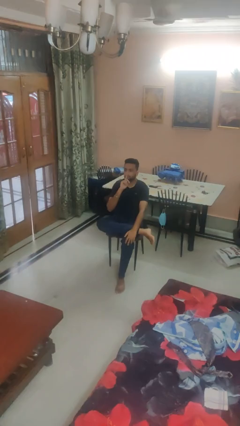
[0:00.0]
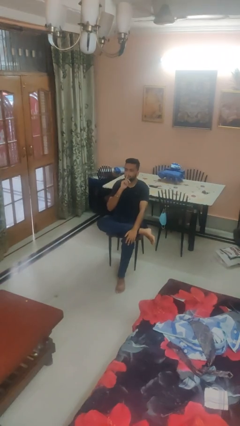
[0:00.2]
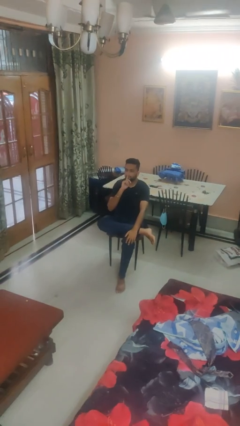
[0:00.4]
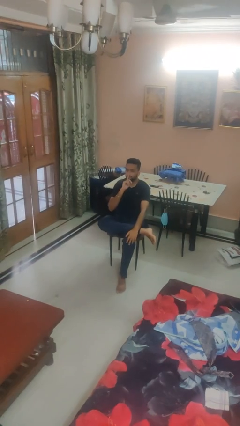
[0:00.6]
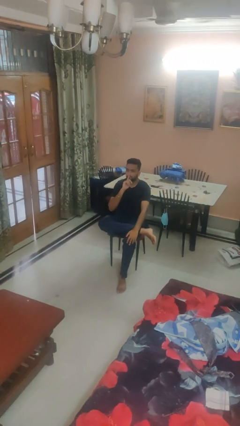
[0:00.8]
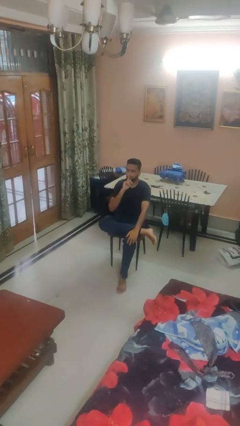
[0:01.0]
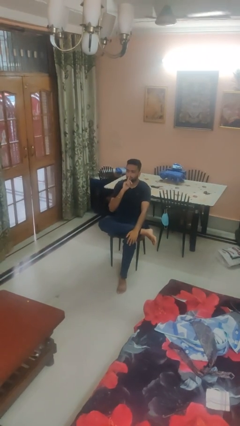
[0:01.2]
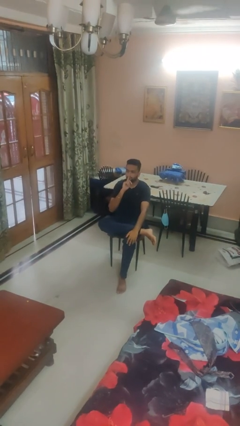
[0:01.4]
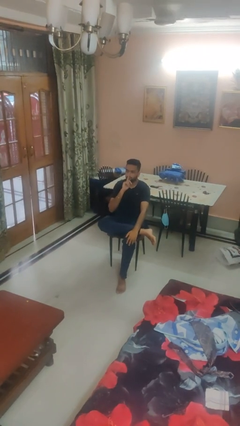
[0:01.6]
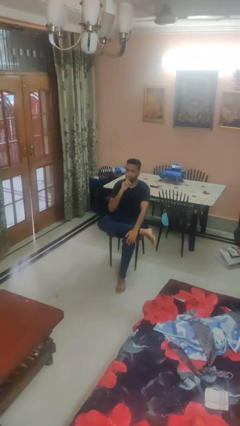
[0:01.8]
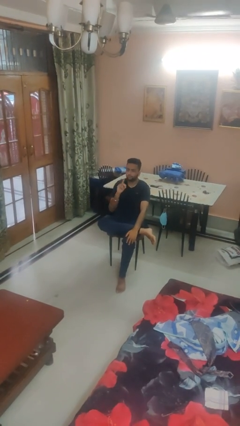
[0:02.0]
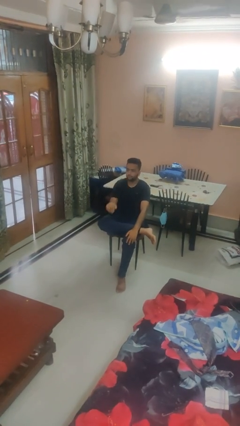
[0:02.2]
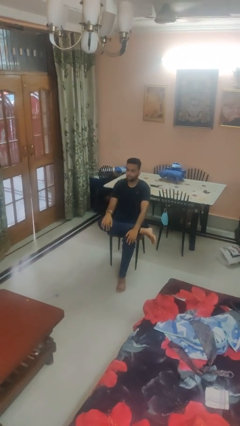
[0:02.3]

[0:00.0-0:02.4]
person gestures be quiet

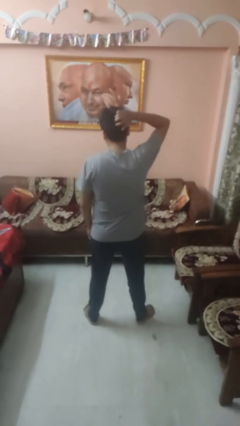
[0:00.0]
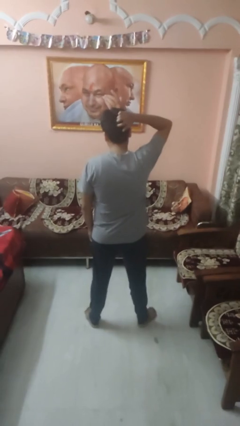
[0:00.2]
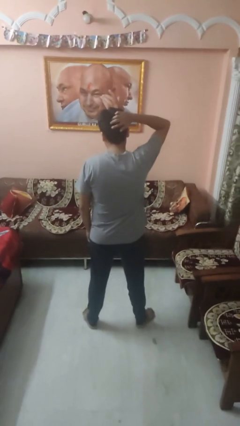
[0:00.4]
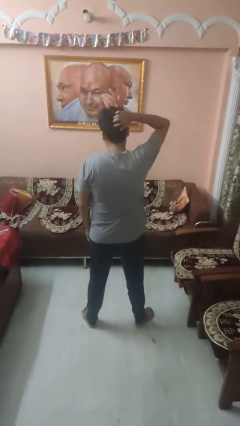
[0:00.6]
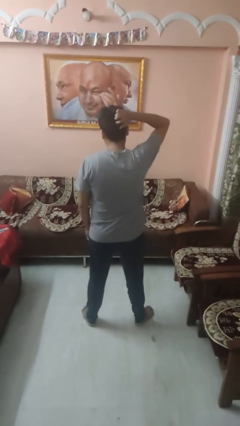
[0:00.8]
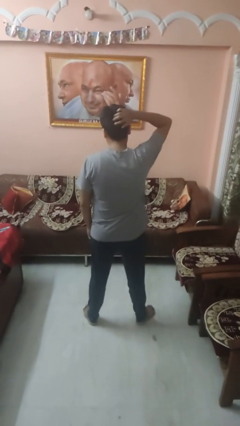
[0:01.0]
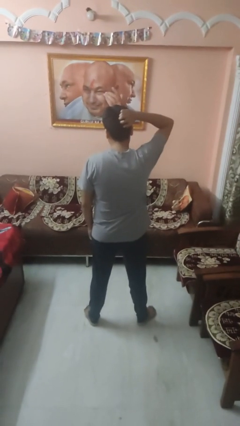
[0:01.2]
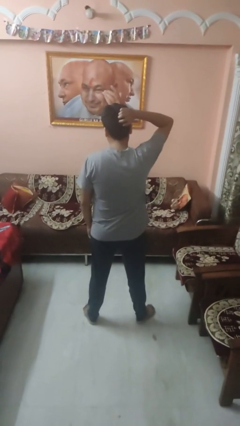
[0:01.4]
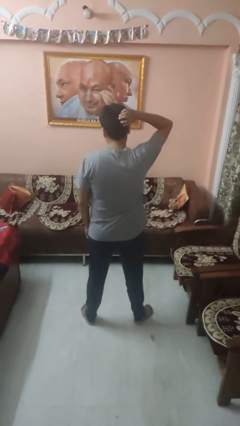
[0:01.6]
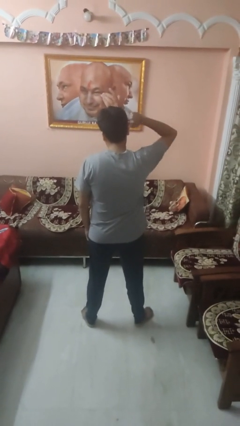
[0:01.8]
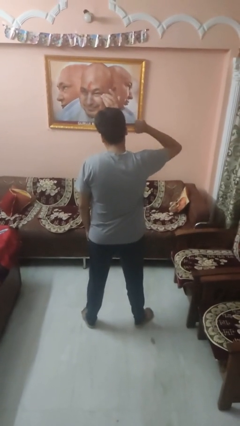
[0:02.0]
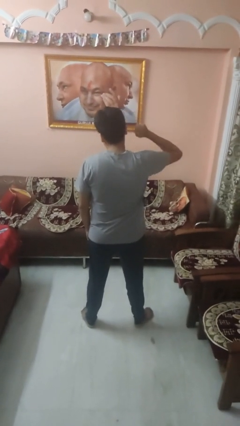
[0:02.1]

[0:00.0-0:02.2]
person scratches face

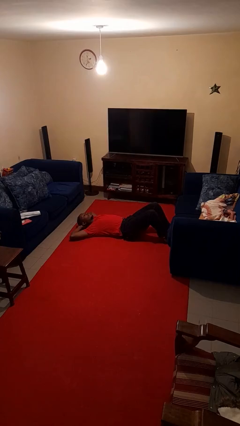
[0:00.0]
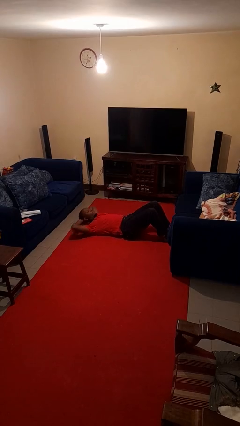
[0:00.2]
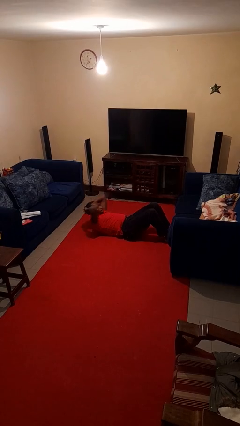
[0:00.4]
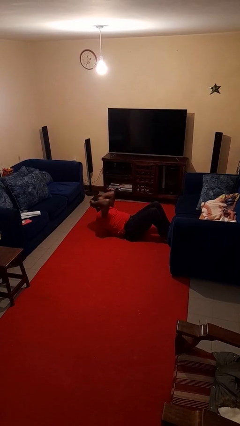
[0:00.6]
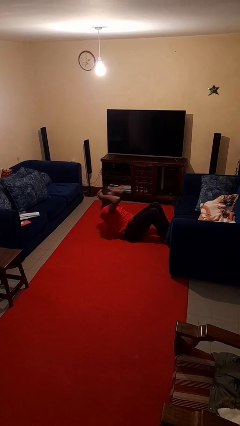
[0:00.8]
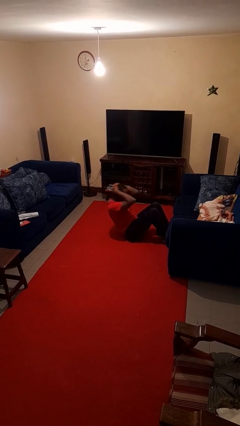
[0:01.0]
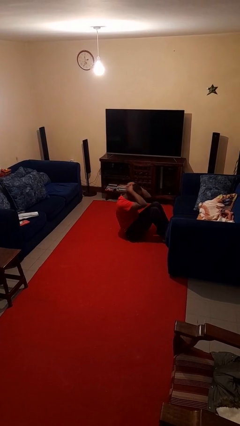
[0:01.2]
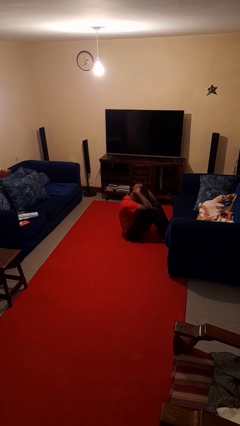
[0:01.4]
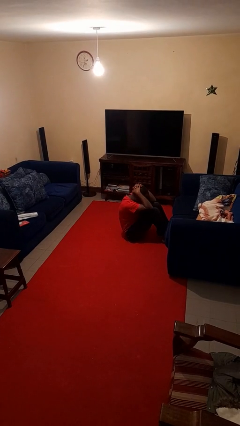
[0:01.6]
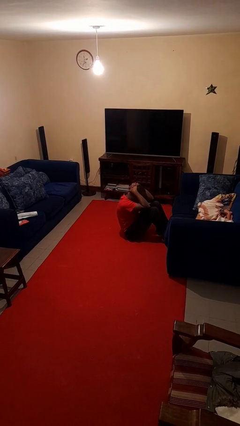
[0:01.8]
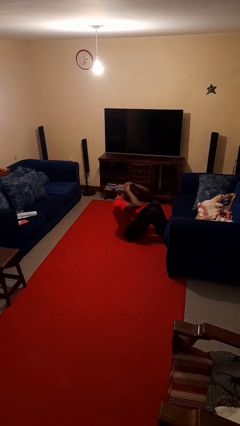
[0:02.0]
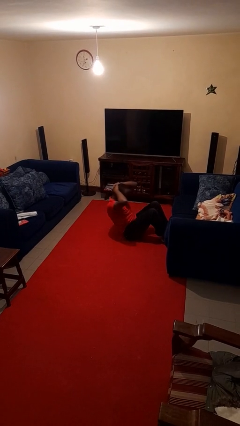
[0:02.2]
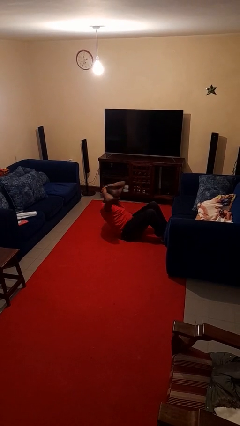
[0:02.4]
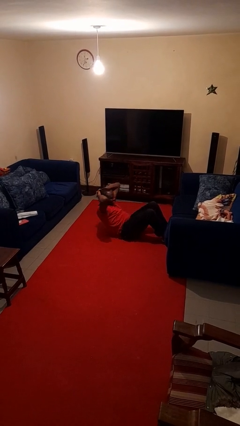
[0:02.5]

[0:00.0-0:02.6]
person exercises with situp

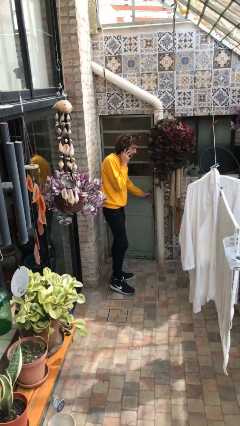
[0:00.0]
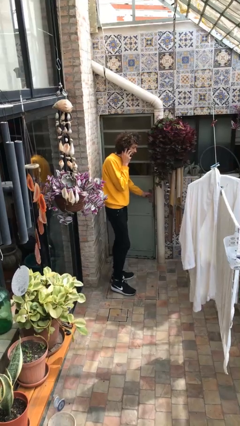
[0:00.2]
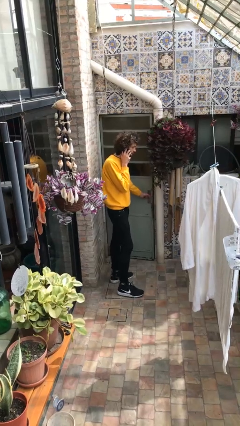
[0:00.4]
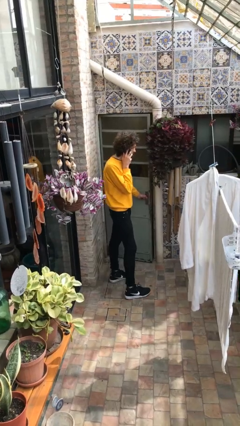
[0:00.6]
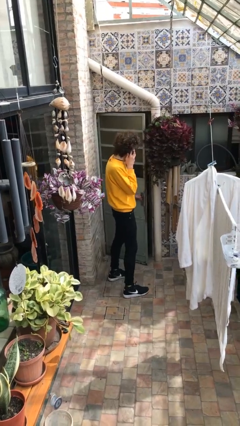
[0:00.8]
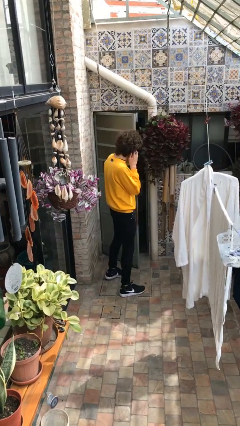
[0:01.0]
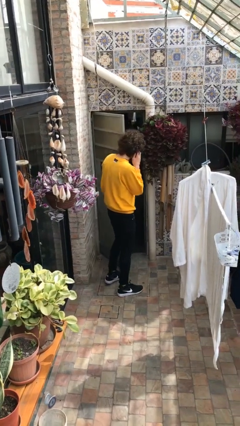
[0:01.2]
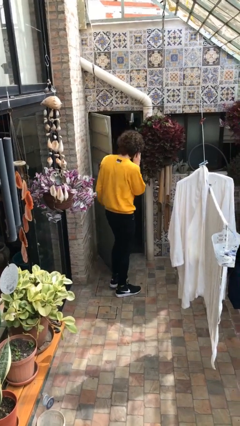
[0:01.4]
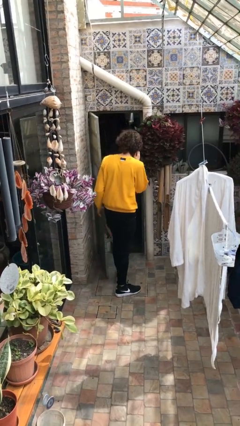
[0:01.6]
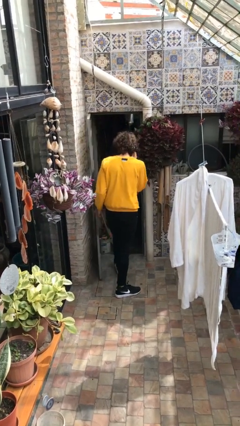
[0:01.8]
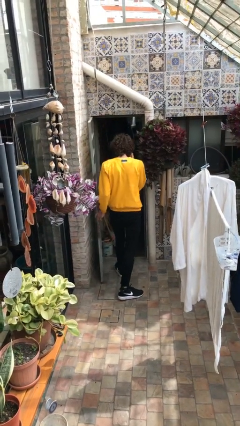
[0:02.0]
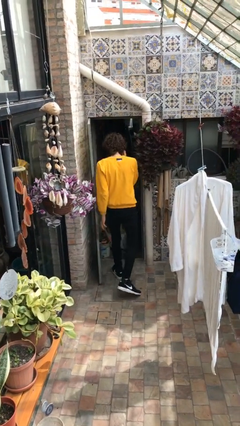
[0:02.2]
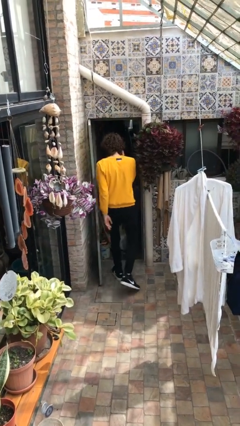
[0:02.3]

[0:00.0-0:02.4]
person opens facility door

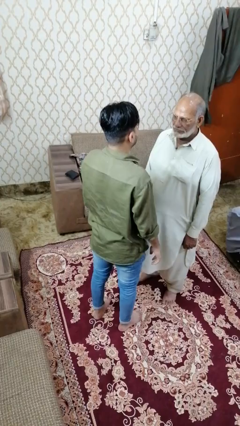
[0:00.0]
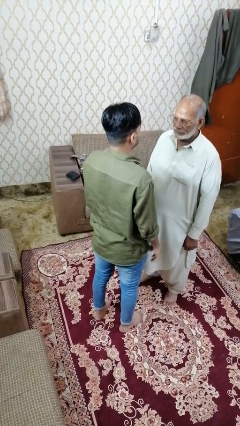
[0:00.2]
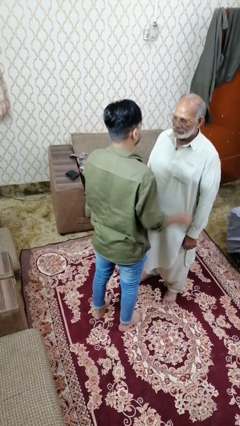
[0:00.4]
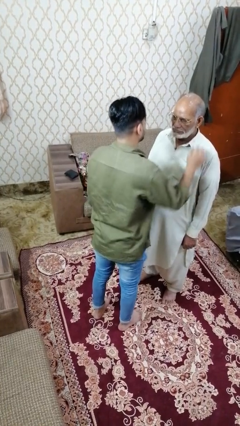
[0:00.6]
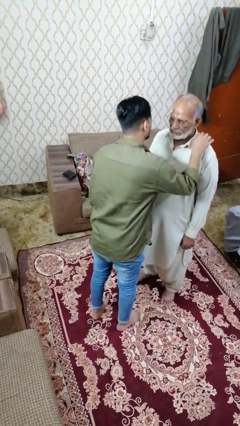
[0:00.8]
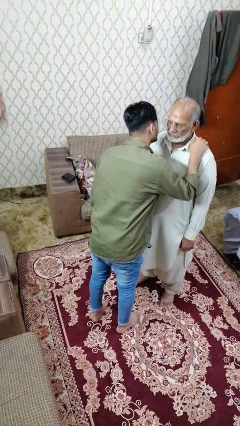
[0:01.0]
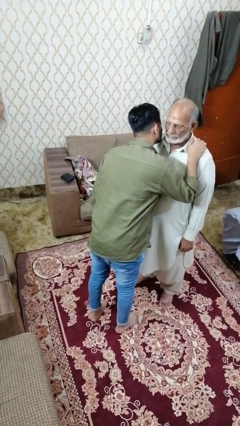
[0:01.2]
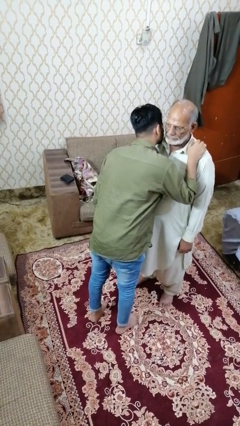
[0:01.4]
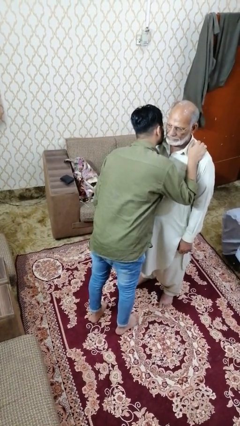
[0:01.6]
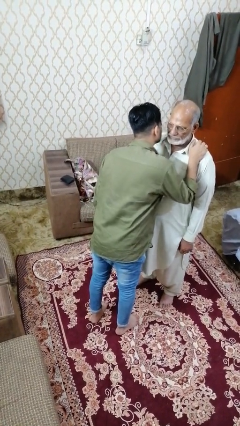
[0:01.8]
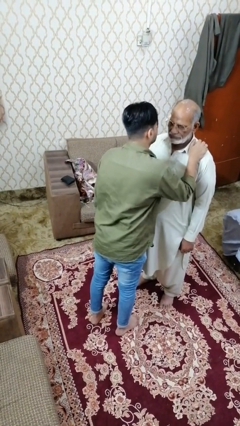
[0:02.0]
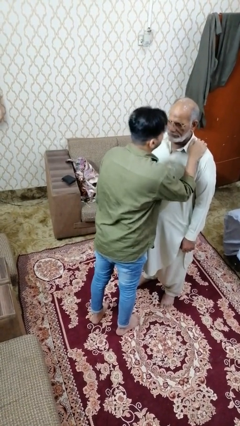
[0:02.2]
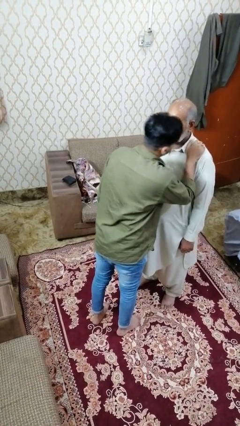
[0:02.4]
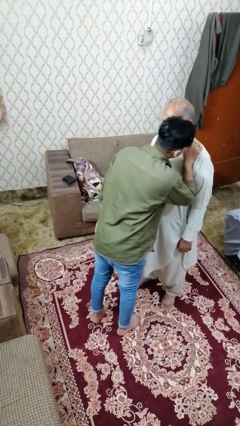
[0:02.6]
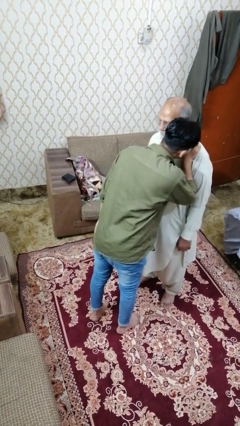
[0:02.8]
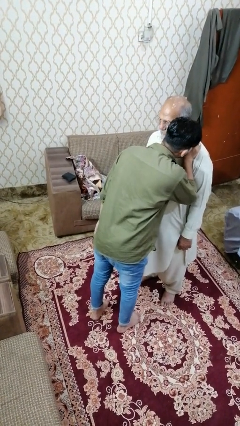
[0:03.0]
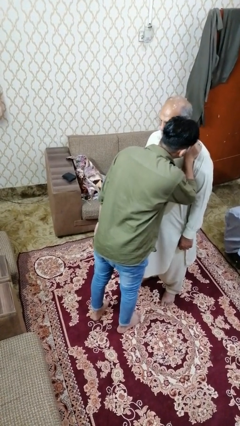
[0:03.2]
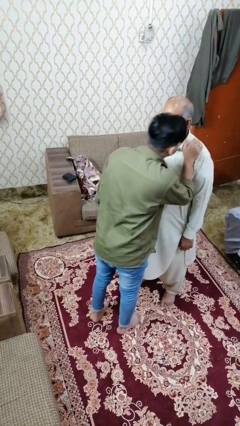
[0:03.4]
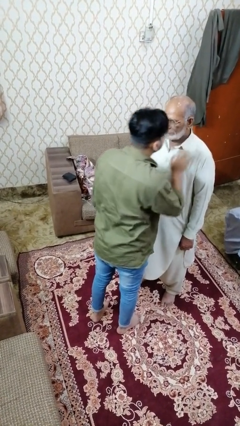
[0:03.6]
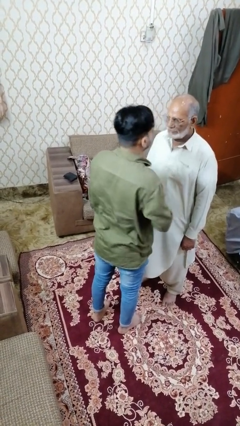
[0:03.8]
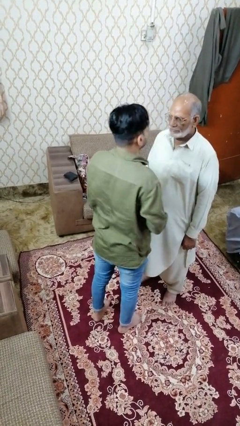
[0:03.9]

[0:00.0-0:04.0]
person kisses cheek of person

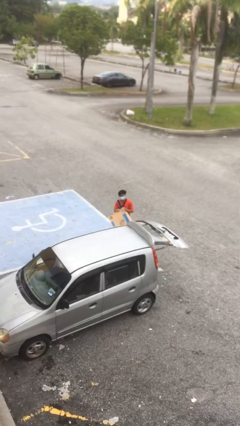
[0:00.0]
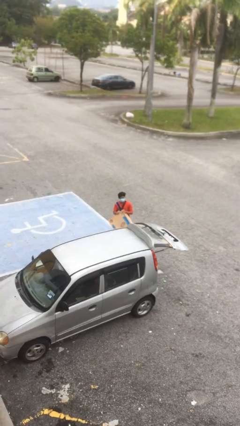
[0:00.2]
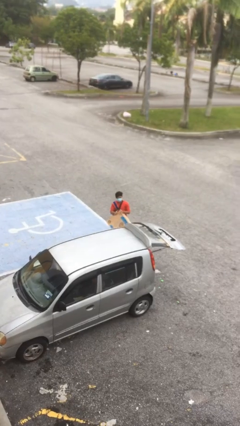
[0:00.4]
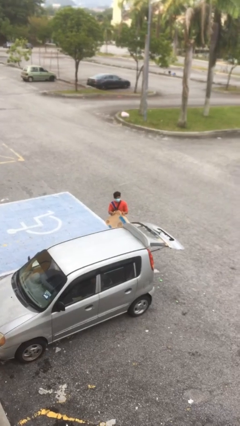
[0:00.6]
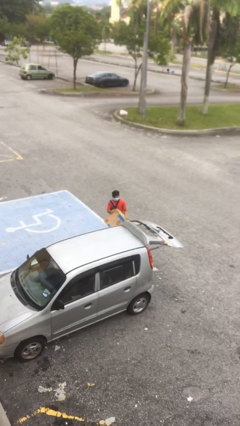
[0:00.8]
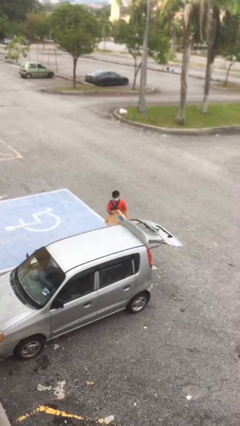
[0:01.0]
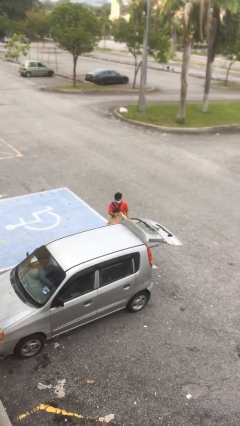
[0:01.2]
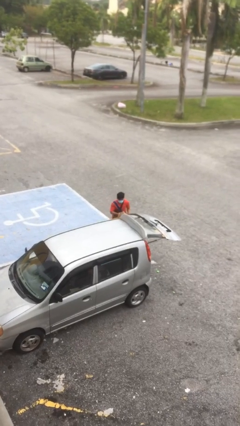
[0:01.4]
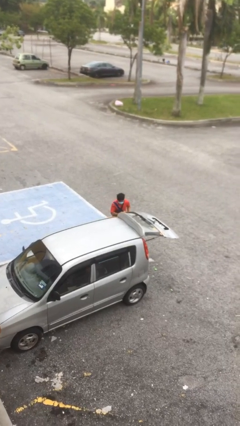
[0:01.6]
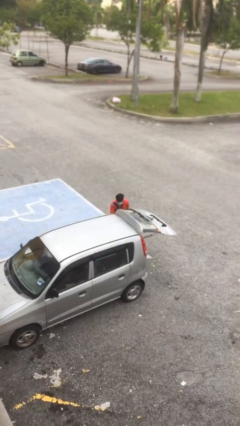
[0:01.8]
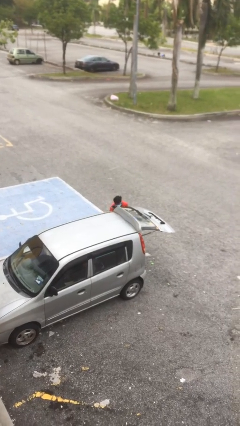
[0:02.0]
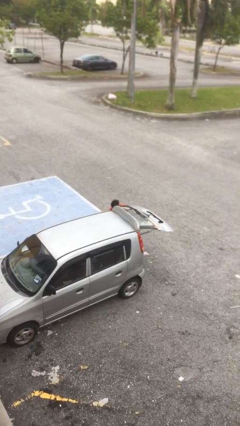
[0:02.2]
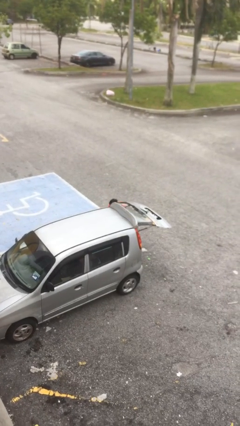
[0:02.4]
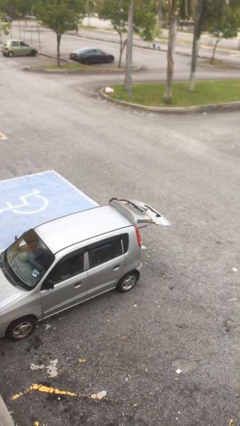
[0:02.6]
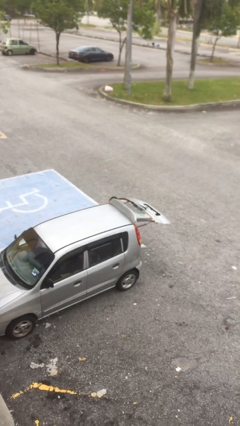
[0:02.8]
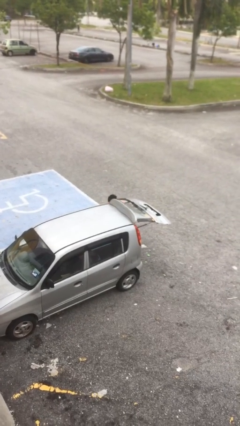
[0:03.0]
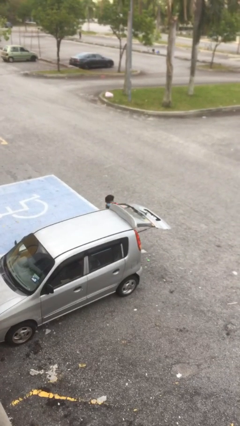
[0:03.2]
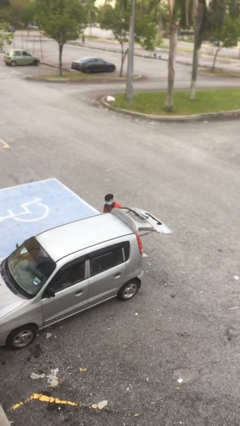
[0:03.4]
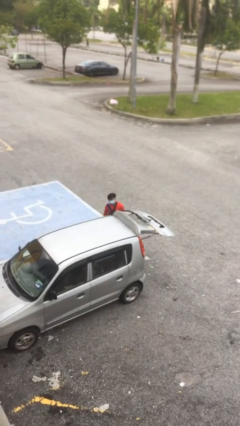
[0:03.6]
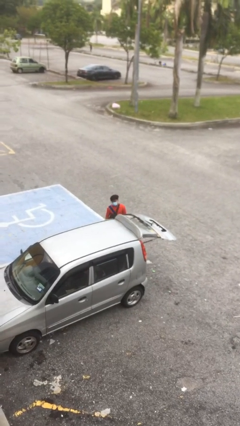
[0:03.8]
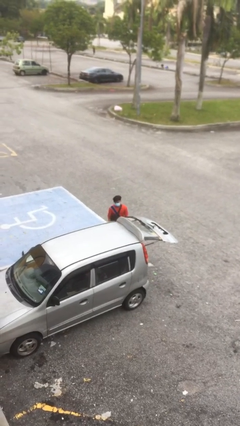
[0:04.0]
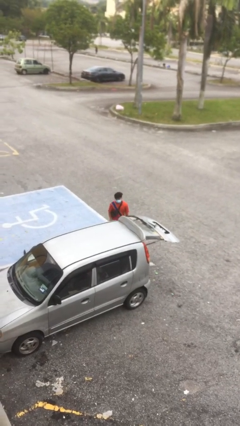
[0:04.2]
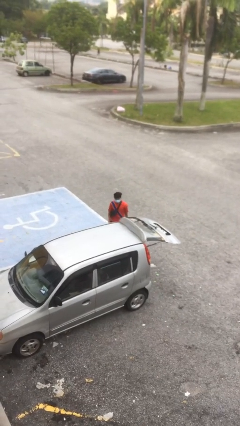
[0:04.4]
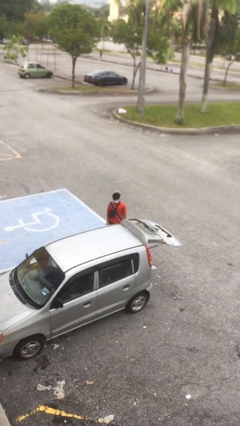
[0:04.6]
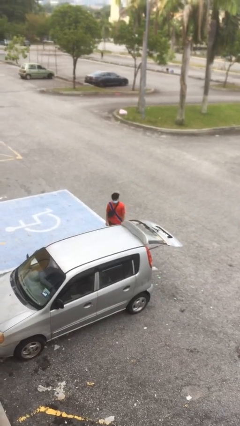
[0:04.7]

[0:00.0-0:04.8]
person loads car
